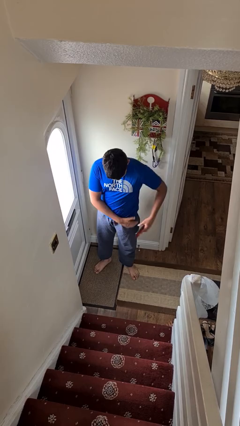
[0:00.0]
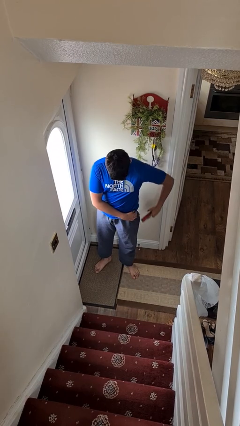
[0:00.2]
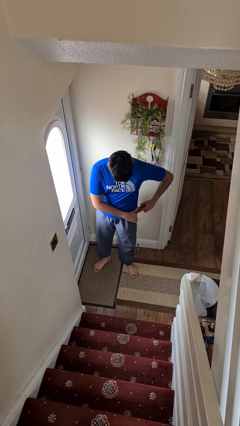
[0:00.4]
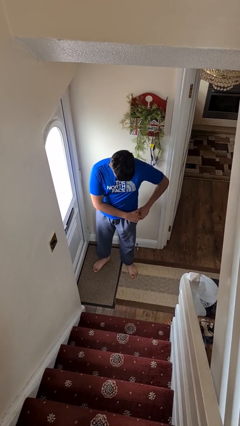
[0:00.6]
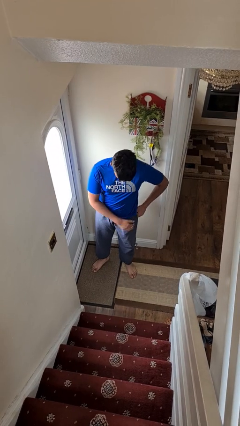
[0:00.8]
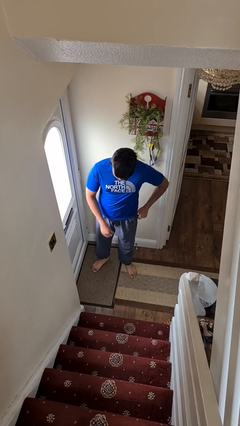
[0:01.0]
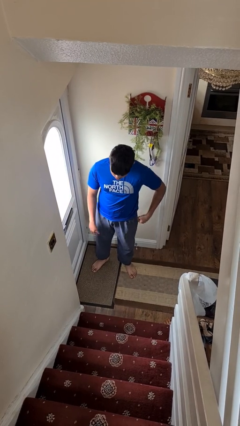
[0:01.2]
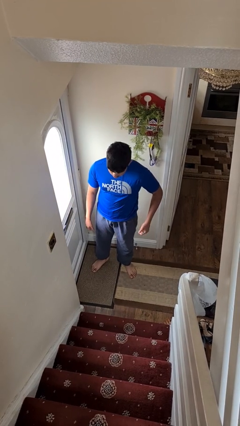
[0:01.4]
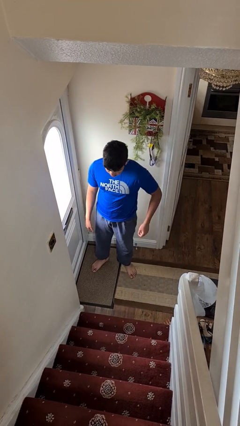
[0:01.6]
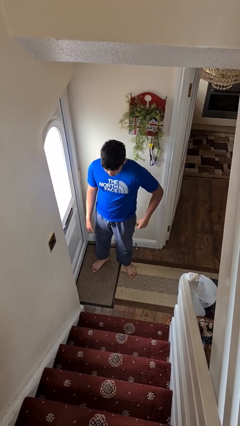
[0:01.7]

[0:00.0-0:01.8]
person puts phone into pocket

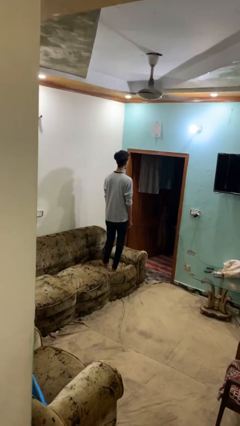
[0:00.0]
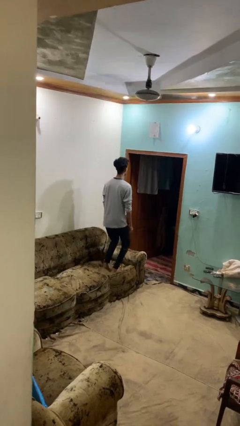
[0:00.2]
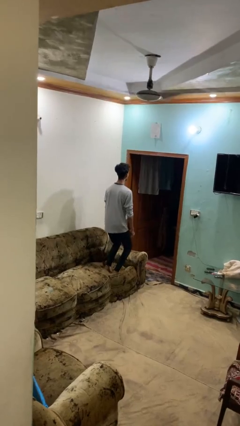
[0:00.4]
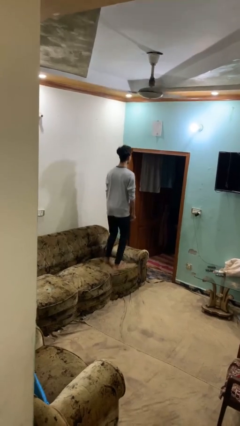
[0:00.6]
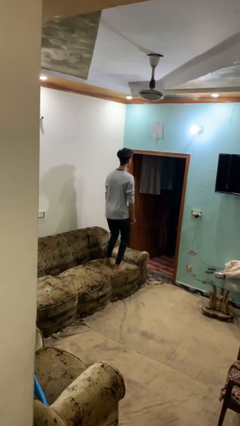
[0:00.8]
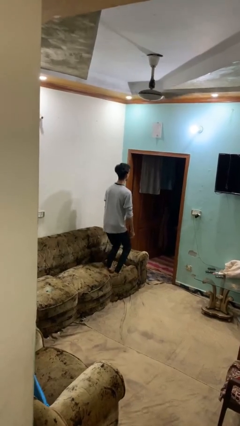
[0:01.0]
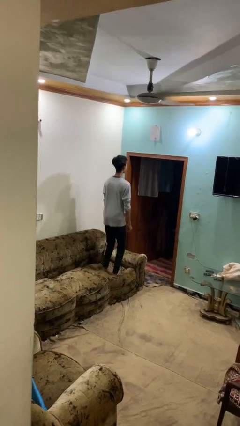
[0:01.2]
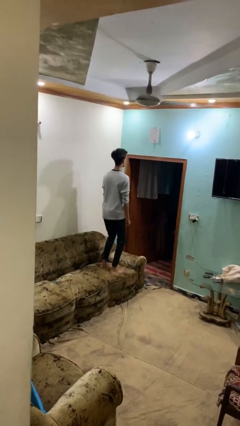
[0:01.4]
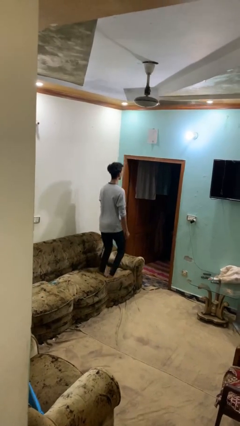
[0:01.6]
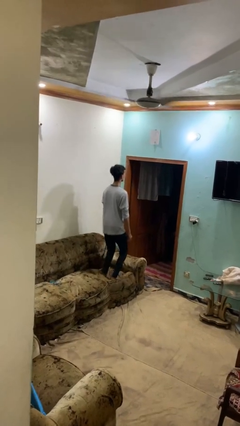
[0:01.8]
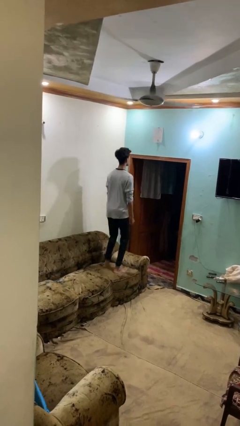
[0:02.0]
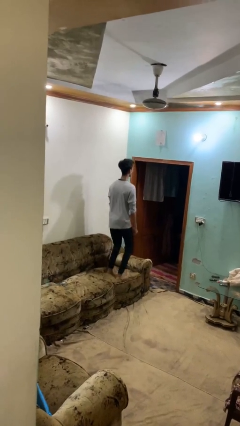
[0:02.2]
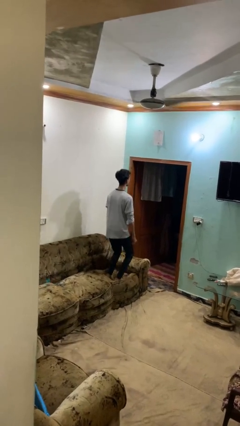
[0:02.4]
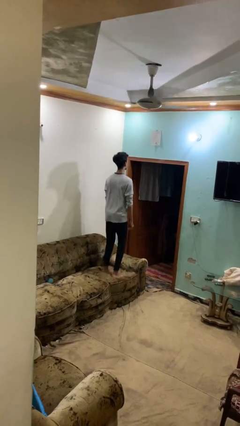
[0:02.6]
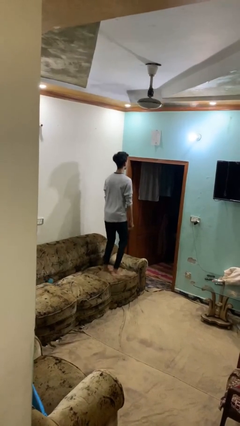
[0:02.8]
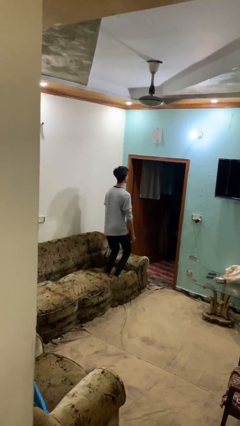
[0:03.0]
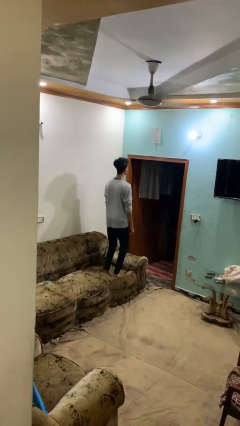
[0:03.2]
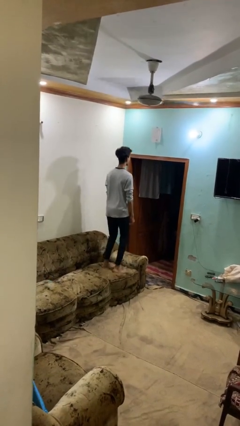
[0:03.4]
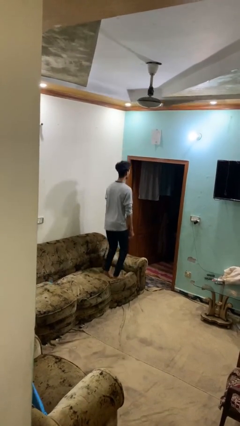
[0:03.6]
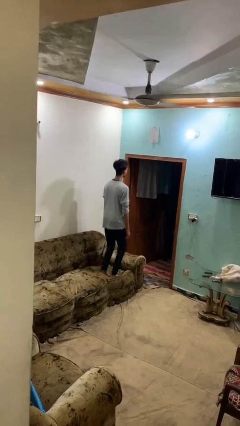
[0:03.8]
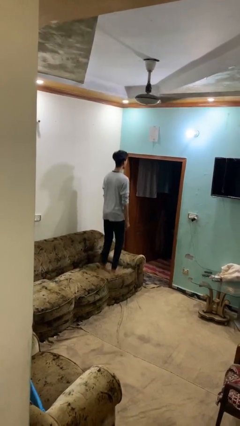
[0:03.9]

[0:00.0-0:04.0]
person jumps on couch

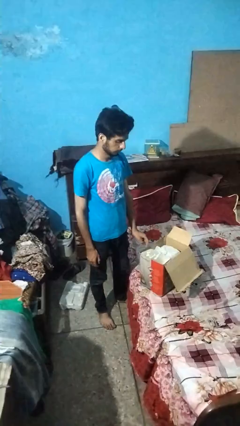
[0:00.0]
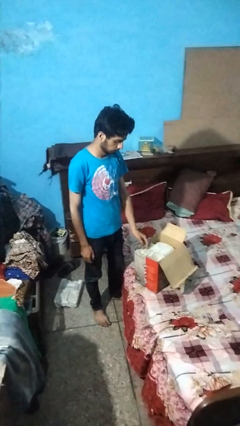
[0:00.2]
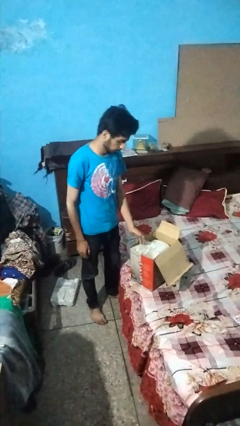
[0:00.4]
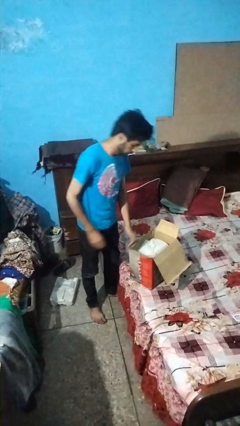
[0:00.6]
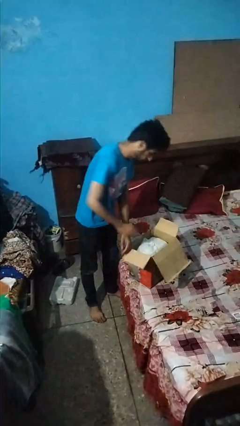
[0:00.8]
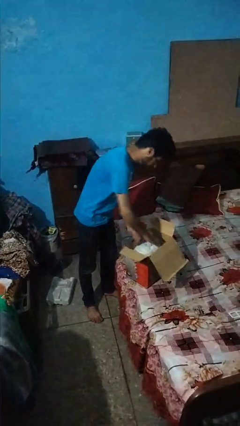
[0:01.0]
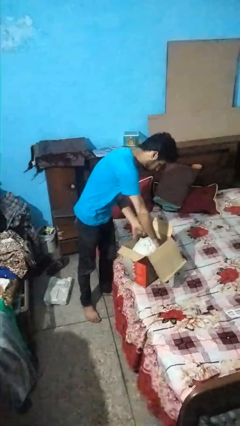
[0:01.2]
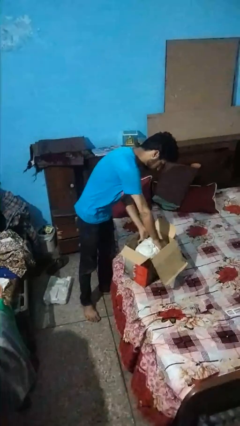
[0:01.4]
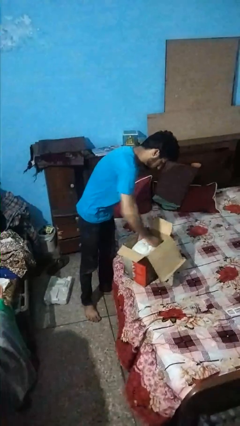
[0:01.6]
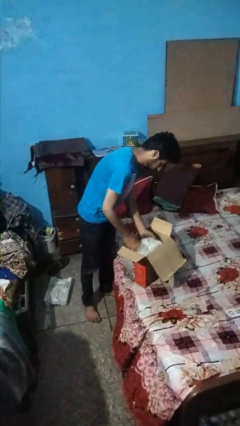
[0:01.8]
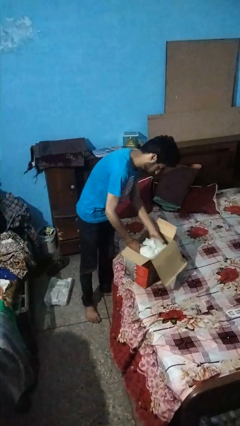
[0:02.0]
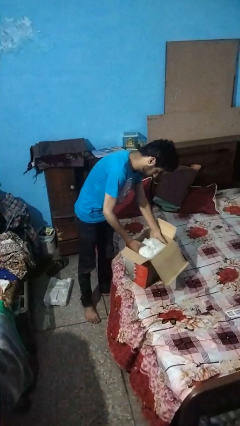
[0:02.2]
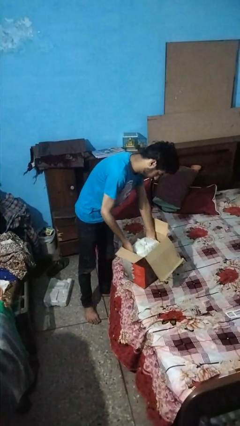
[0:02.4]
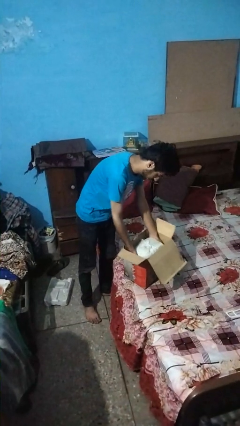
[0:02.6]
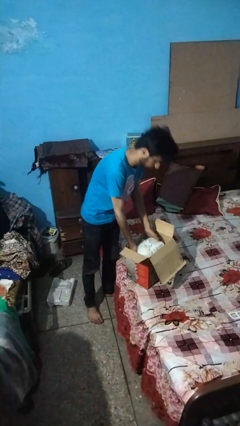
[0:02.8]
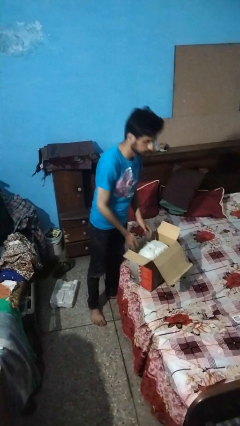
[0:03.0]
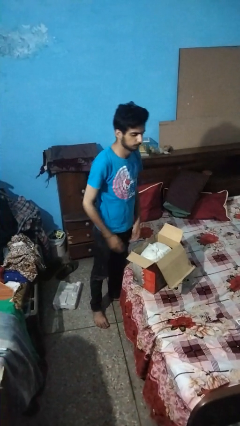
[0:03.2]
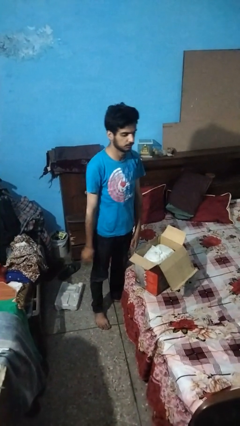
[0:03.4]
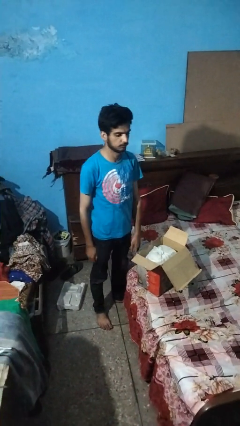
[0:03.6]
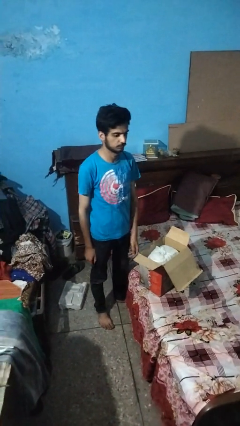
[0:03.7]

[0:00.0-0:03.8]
person searches in box

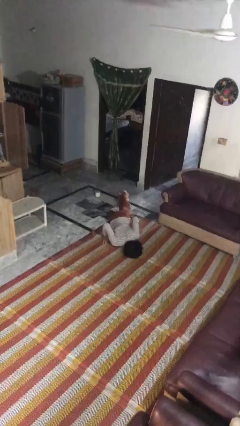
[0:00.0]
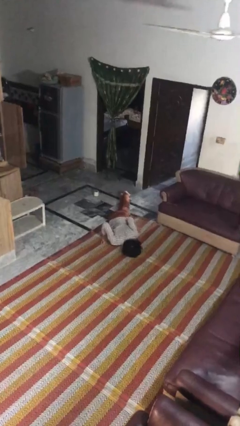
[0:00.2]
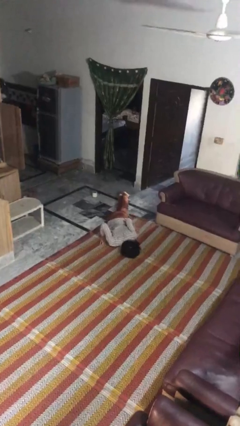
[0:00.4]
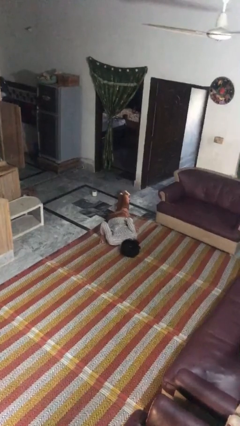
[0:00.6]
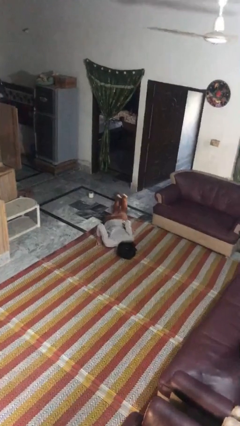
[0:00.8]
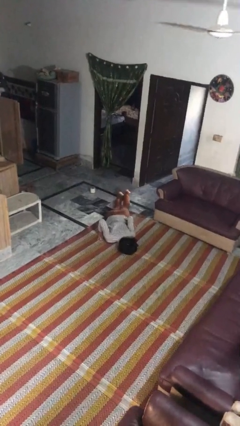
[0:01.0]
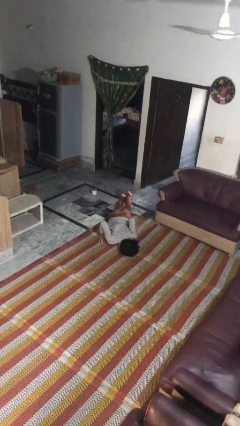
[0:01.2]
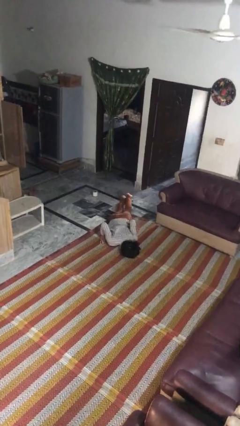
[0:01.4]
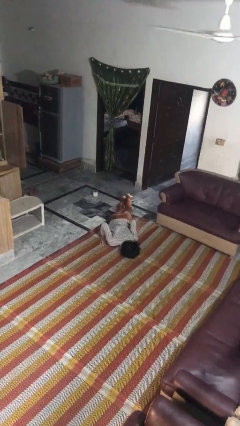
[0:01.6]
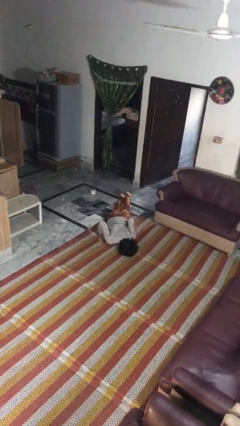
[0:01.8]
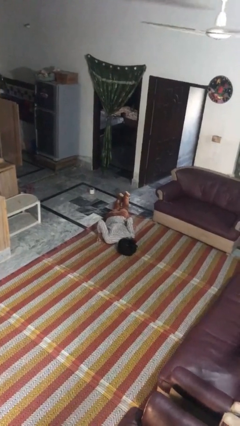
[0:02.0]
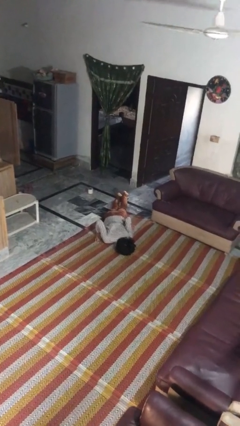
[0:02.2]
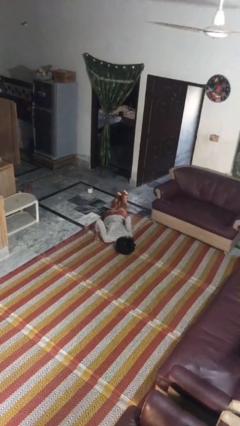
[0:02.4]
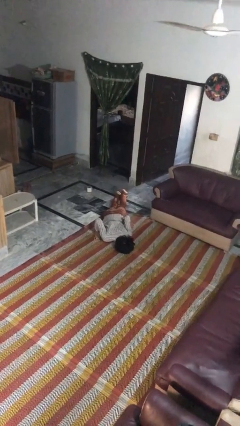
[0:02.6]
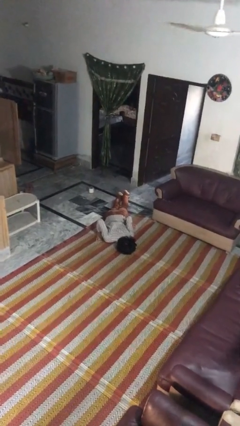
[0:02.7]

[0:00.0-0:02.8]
person lies down on floor

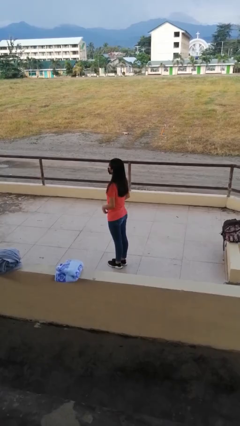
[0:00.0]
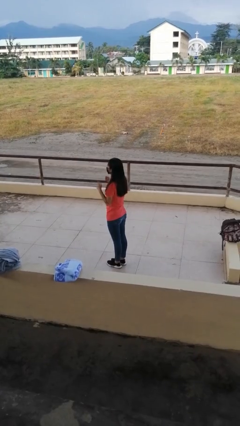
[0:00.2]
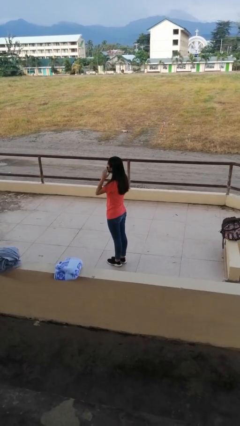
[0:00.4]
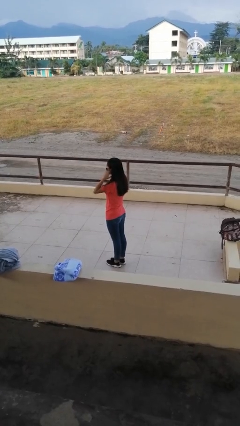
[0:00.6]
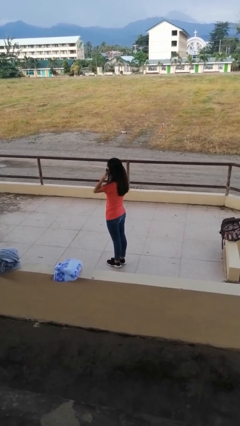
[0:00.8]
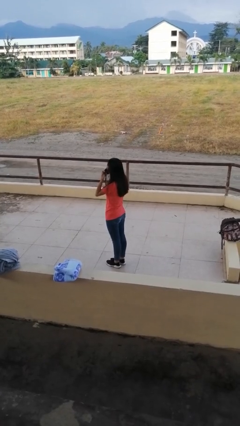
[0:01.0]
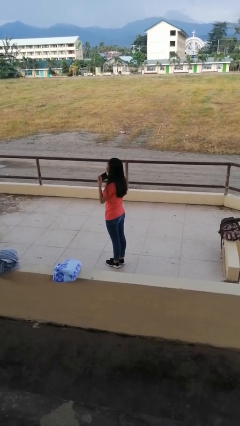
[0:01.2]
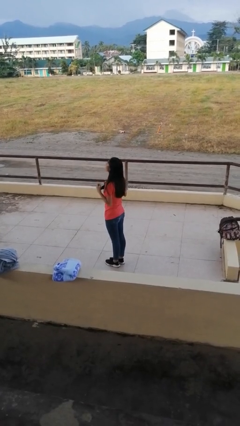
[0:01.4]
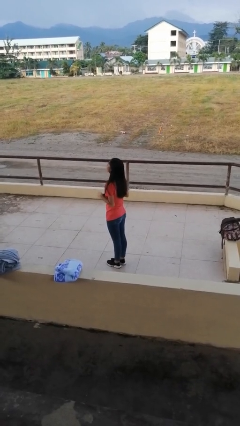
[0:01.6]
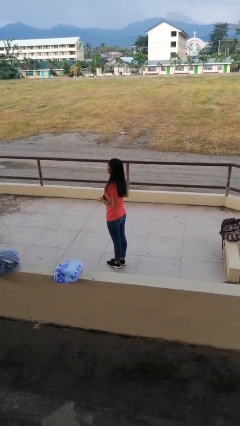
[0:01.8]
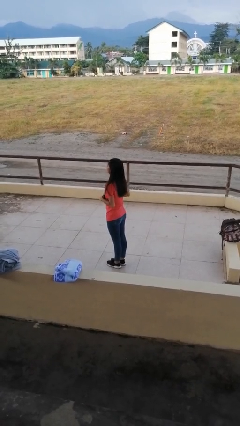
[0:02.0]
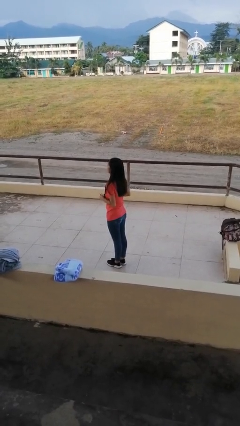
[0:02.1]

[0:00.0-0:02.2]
person takes off facemask

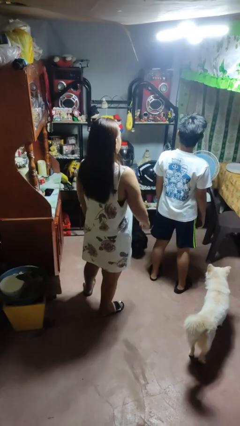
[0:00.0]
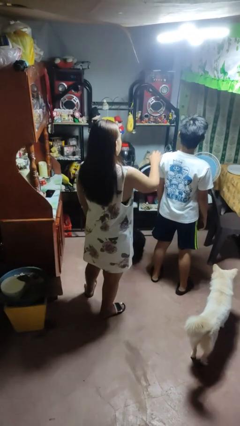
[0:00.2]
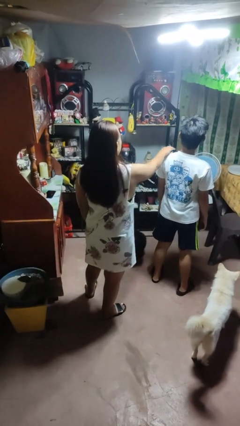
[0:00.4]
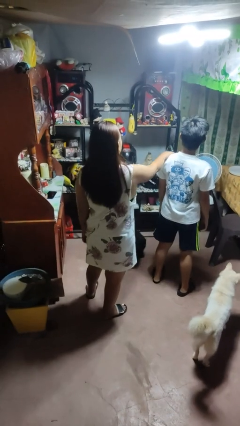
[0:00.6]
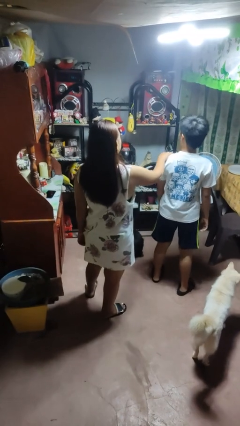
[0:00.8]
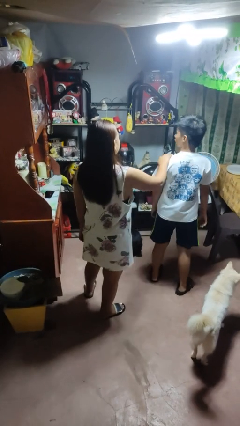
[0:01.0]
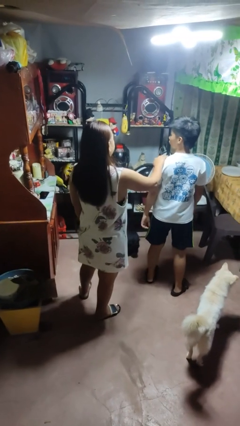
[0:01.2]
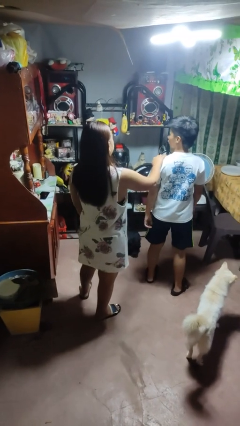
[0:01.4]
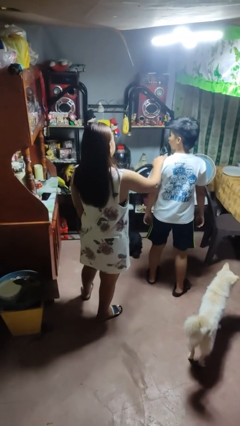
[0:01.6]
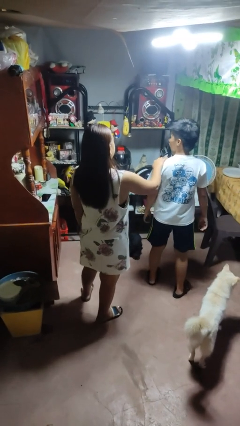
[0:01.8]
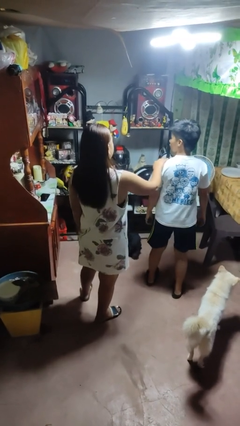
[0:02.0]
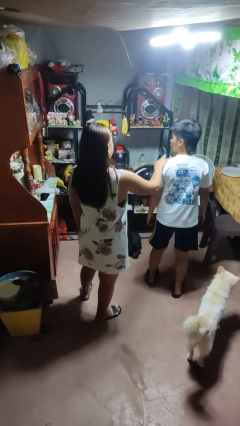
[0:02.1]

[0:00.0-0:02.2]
person grabs person by shoulder

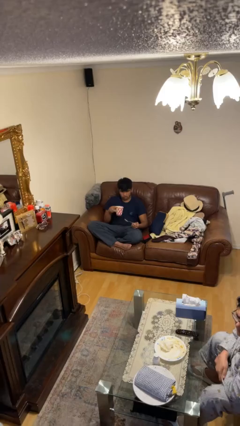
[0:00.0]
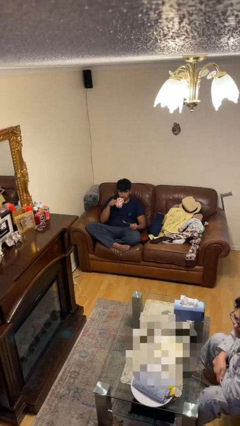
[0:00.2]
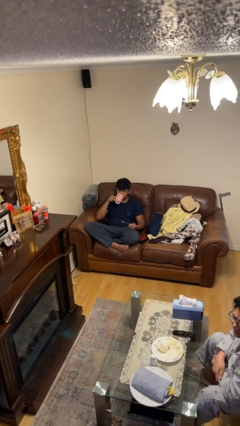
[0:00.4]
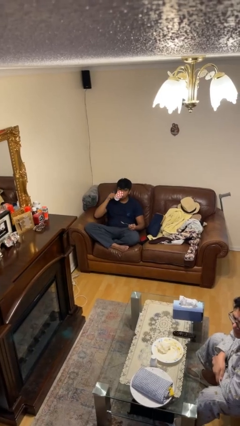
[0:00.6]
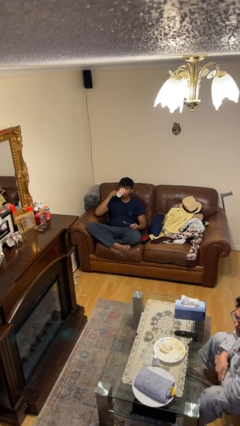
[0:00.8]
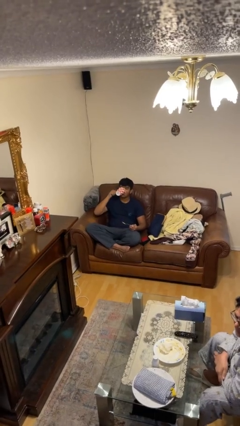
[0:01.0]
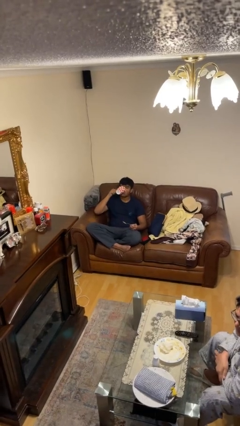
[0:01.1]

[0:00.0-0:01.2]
person drinks from mug
